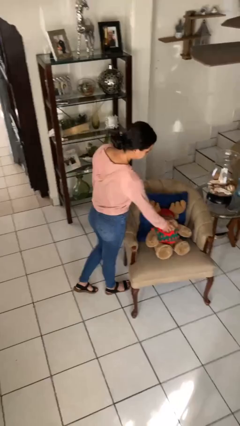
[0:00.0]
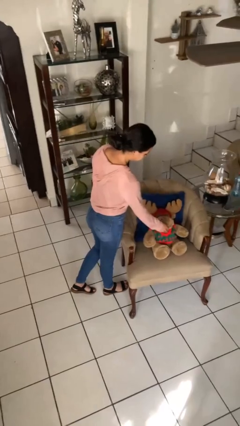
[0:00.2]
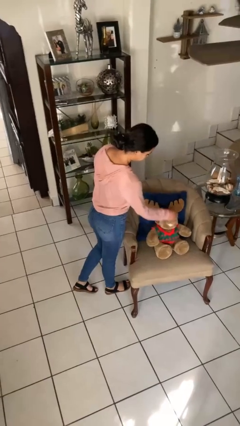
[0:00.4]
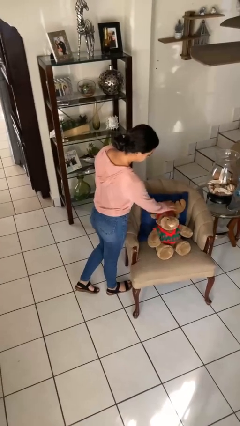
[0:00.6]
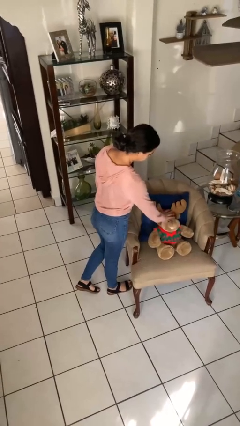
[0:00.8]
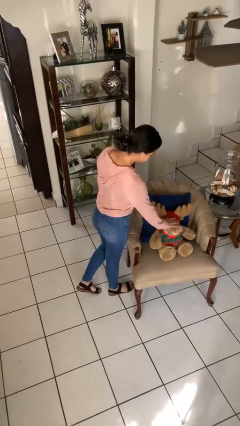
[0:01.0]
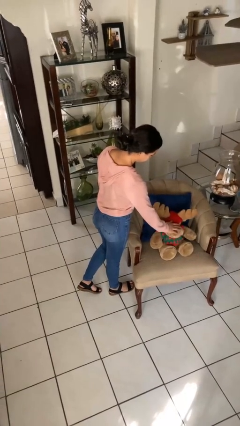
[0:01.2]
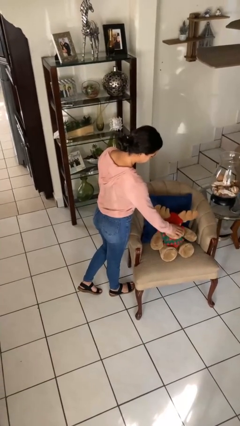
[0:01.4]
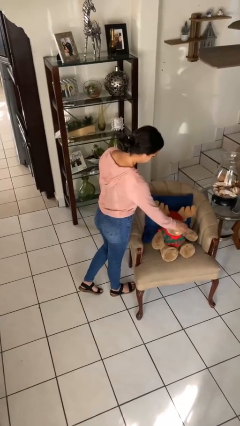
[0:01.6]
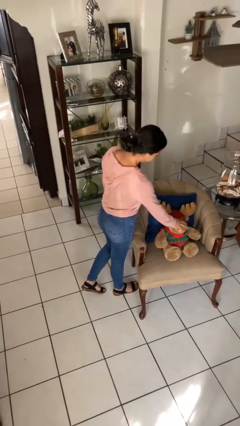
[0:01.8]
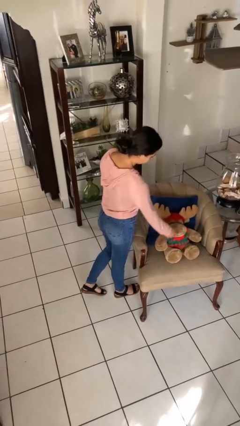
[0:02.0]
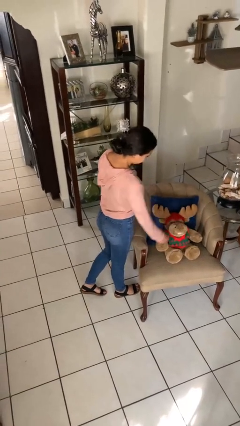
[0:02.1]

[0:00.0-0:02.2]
person waves hand over object

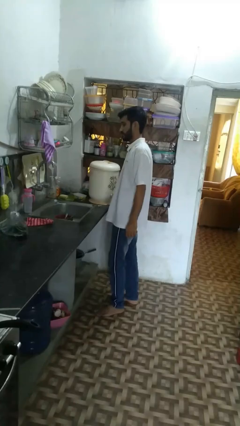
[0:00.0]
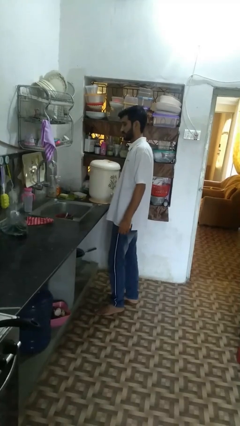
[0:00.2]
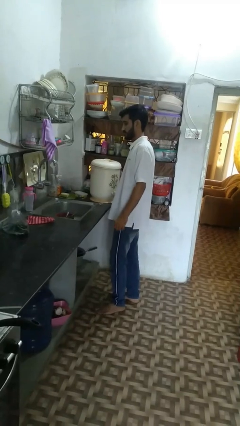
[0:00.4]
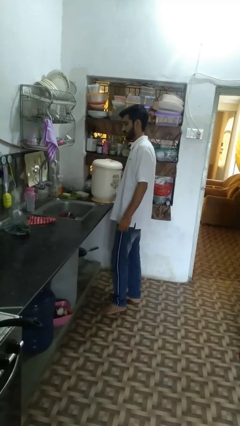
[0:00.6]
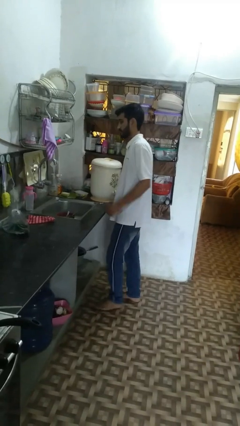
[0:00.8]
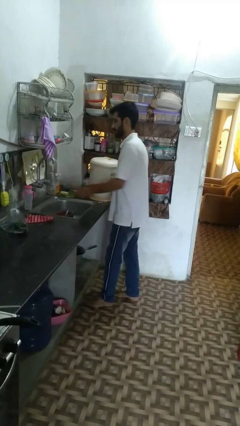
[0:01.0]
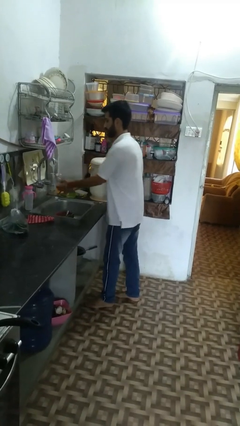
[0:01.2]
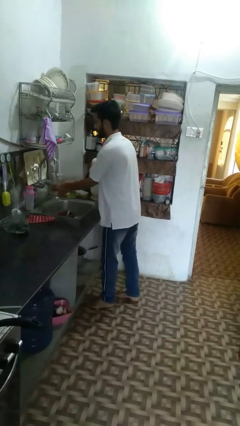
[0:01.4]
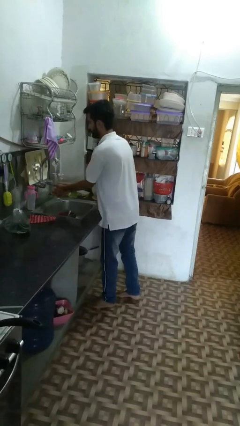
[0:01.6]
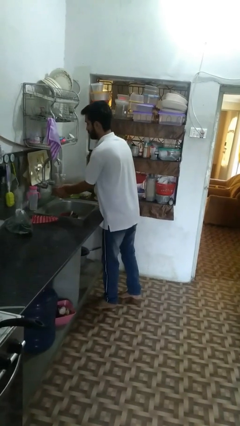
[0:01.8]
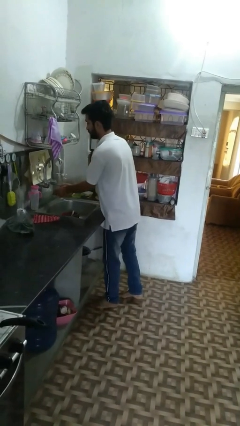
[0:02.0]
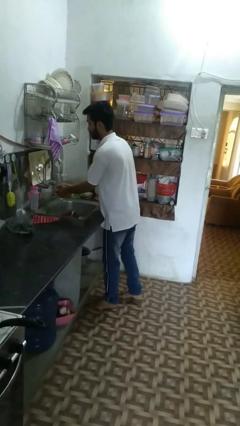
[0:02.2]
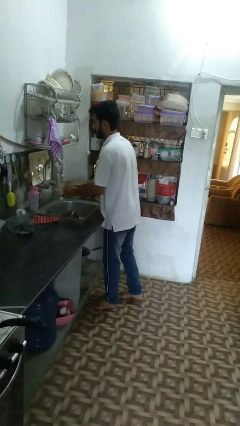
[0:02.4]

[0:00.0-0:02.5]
person washes hands

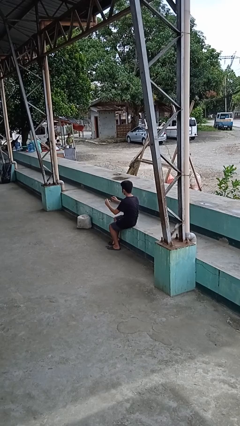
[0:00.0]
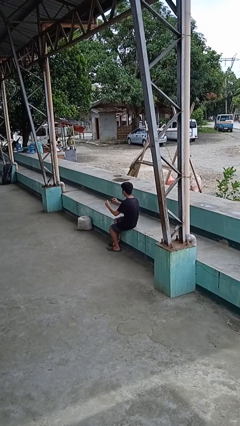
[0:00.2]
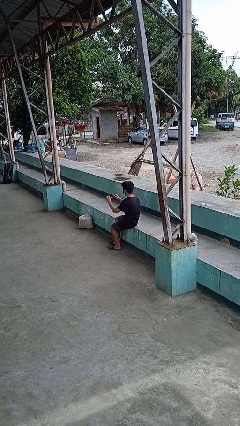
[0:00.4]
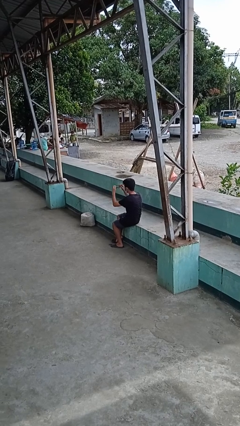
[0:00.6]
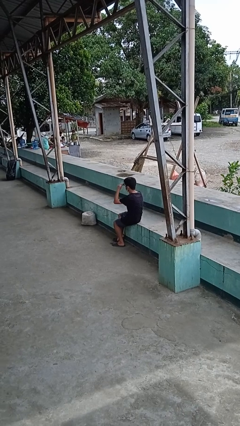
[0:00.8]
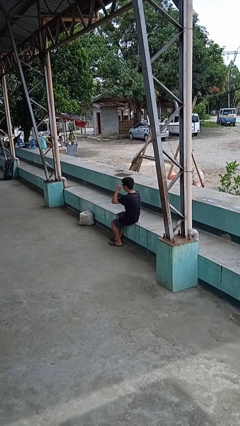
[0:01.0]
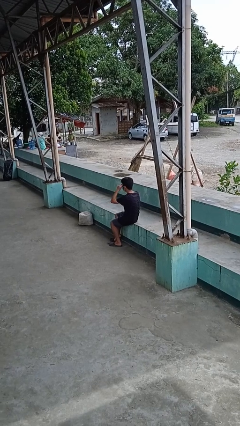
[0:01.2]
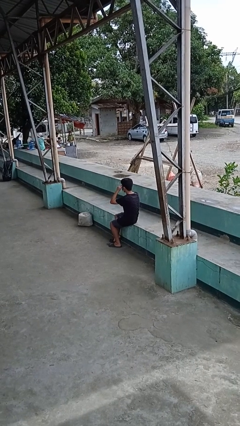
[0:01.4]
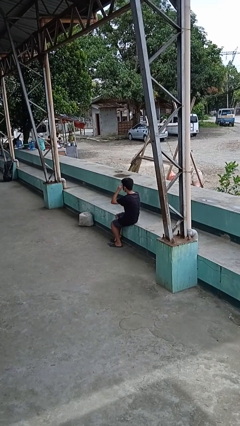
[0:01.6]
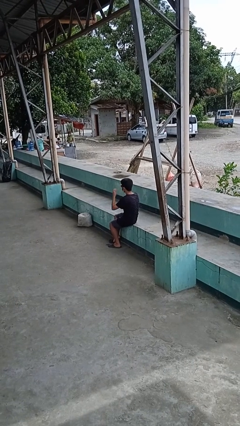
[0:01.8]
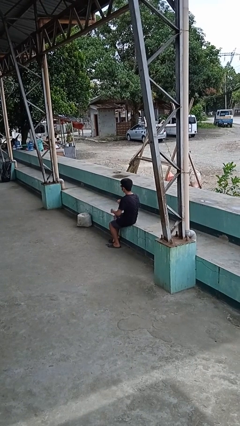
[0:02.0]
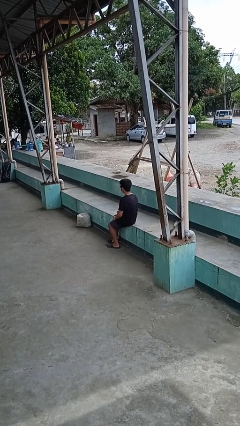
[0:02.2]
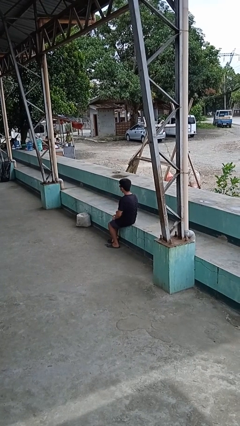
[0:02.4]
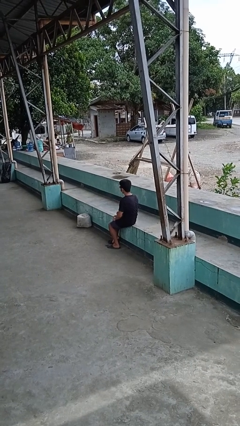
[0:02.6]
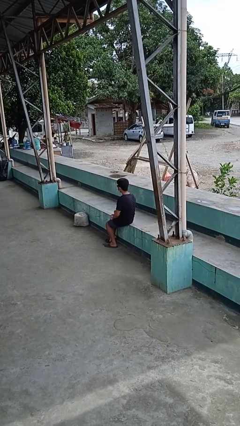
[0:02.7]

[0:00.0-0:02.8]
person puts on sunglasses

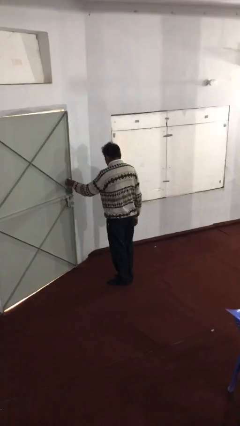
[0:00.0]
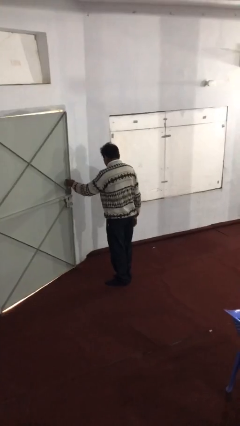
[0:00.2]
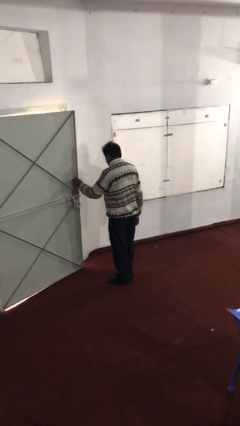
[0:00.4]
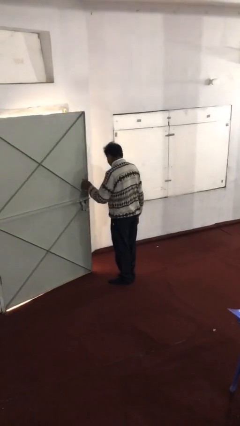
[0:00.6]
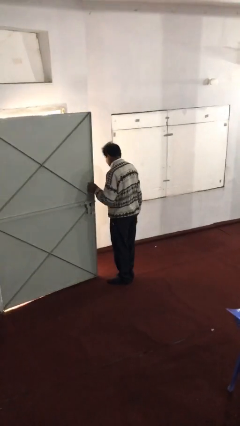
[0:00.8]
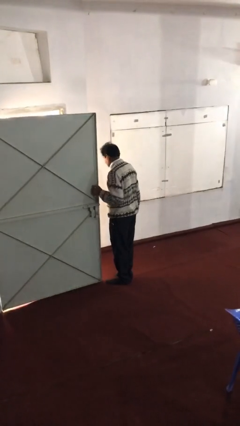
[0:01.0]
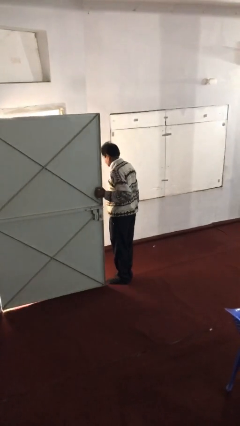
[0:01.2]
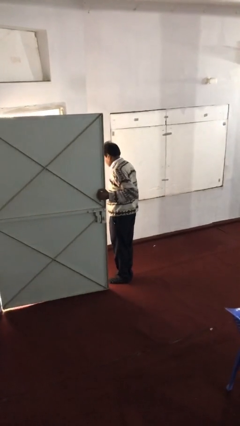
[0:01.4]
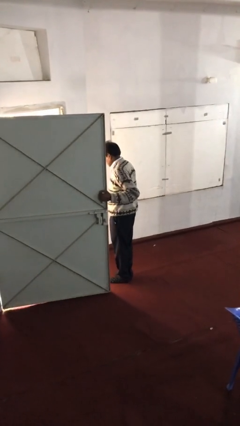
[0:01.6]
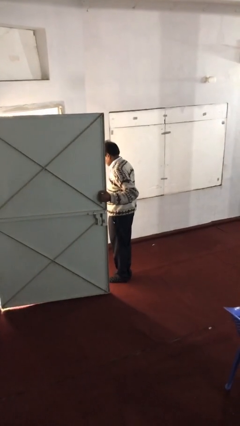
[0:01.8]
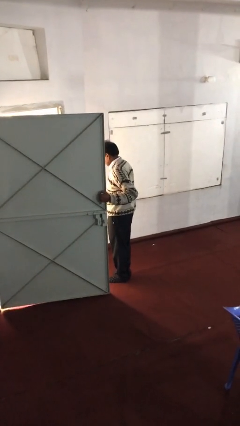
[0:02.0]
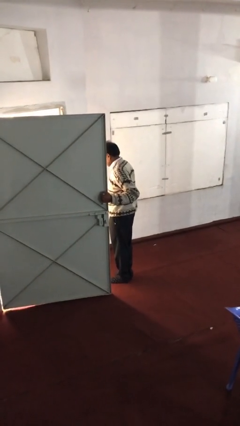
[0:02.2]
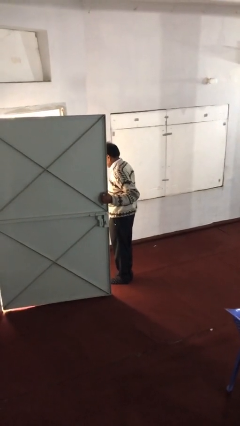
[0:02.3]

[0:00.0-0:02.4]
person opens facility door

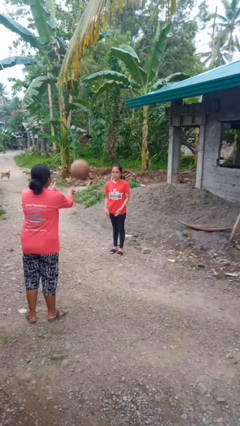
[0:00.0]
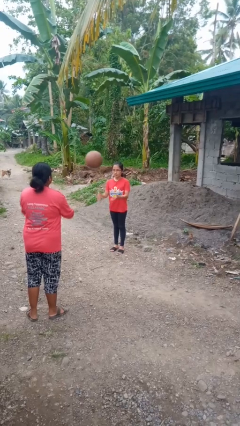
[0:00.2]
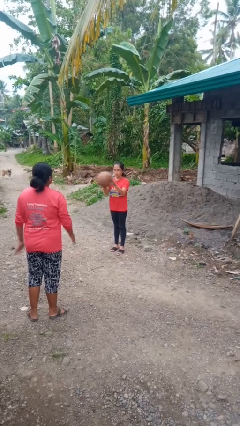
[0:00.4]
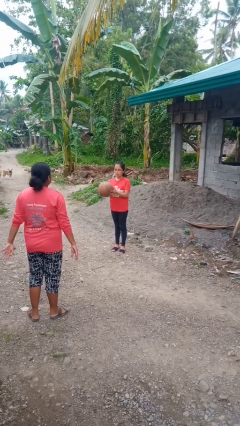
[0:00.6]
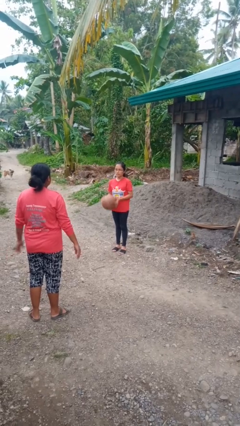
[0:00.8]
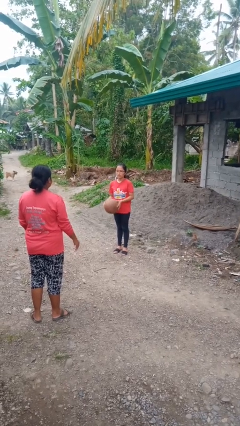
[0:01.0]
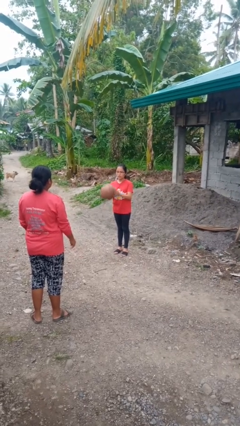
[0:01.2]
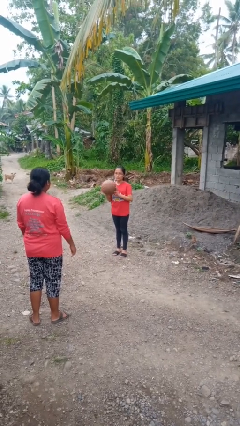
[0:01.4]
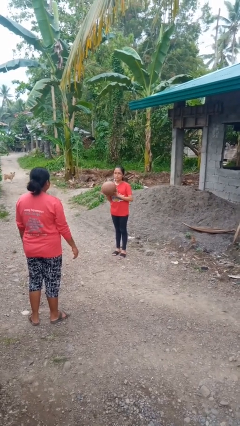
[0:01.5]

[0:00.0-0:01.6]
person catches object from person

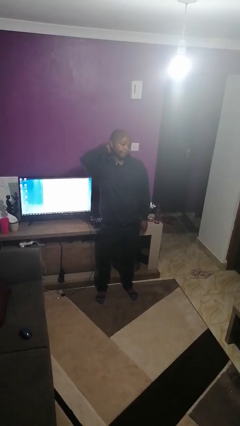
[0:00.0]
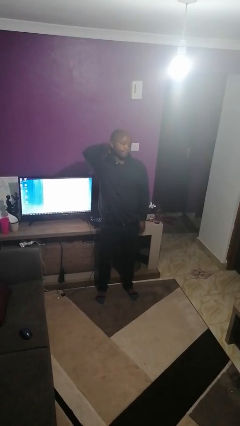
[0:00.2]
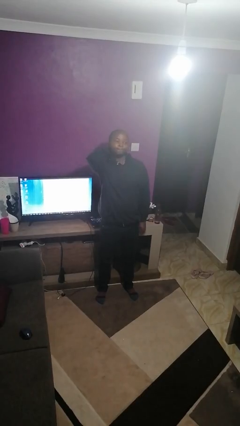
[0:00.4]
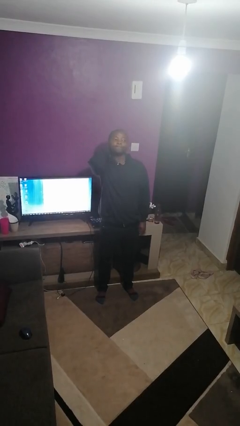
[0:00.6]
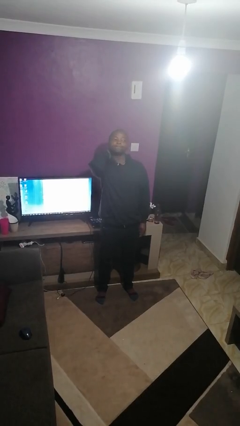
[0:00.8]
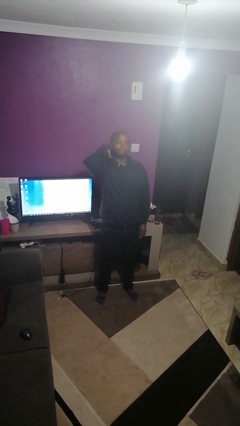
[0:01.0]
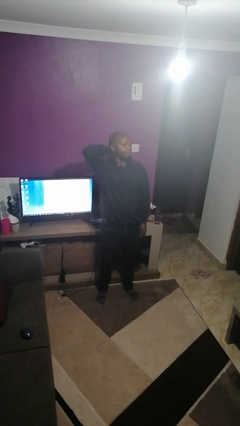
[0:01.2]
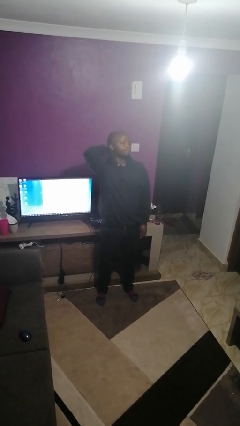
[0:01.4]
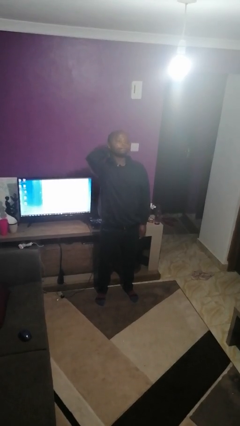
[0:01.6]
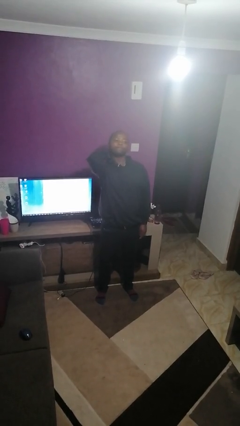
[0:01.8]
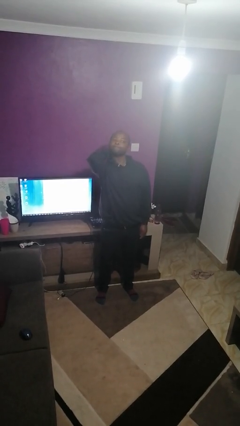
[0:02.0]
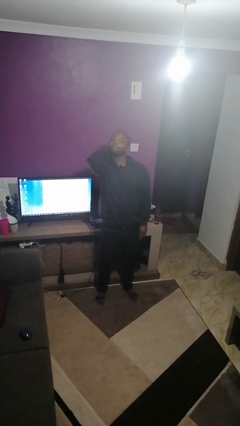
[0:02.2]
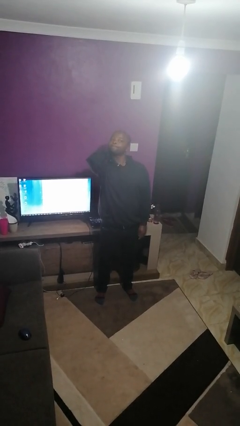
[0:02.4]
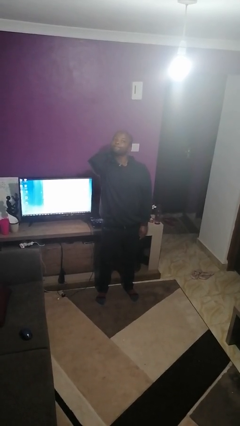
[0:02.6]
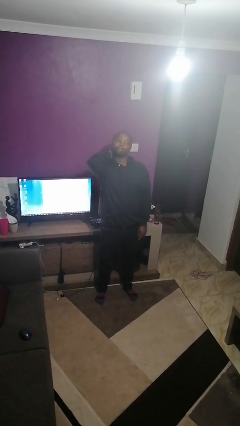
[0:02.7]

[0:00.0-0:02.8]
person rubs neck

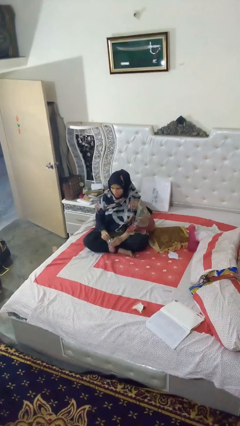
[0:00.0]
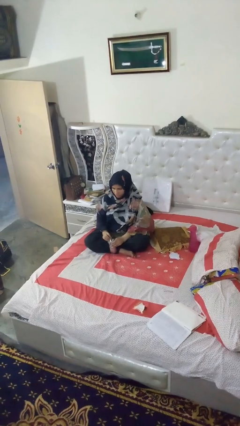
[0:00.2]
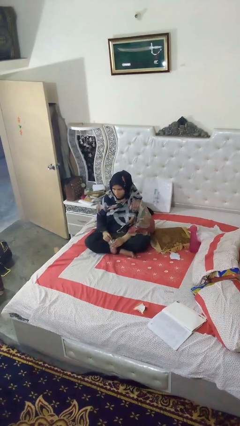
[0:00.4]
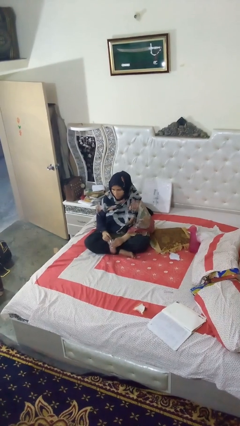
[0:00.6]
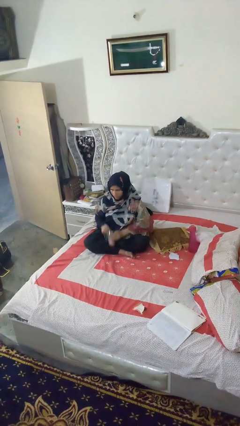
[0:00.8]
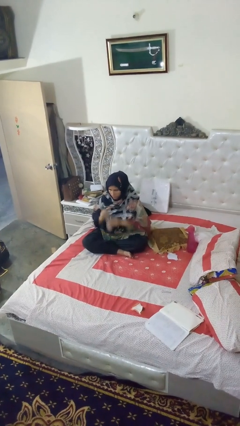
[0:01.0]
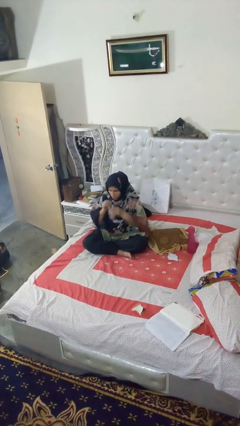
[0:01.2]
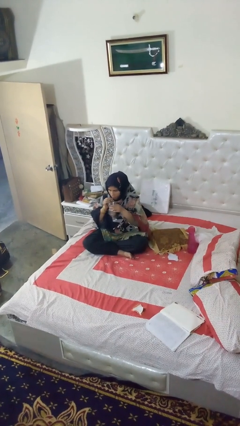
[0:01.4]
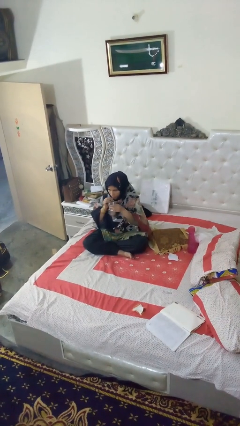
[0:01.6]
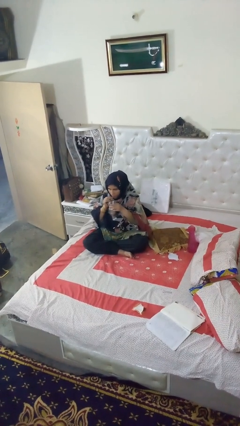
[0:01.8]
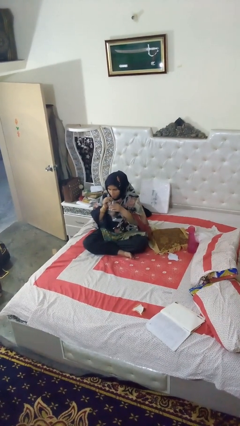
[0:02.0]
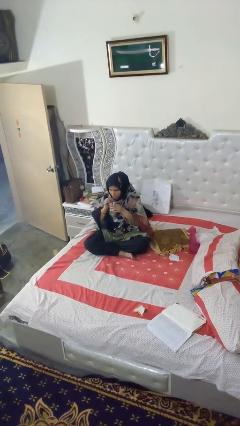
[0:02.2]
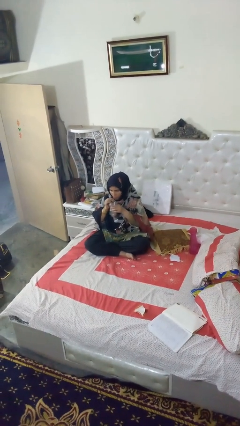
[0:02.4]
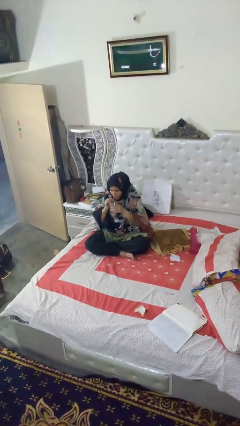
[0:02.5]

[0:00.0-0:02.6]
person drinks from straw

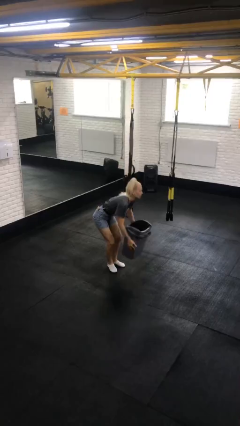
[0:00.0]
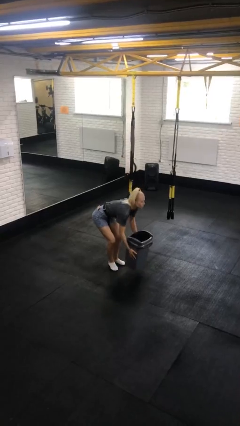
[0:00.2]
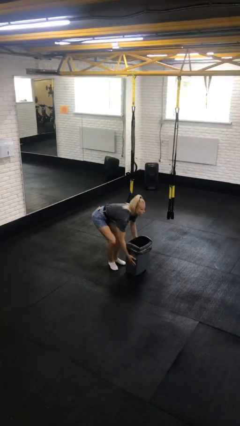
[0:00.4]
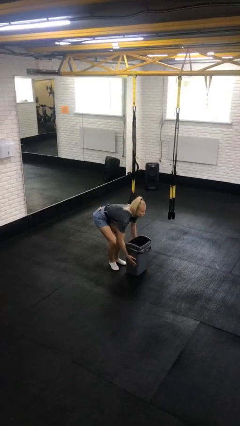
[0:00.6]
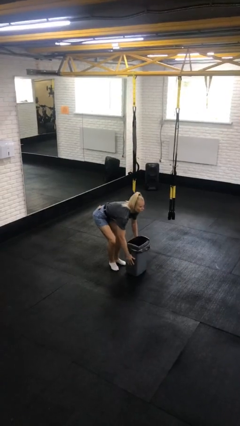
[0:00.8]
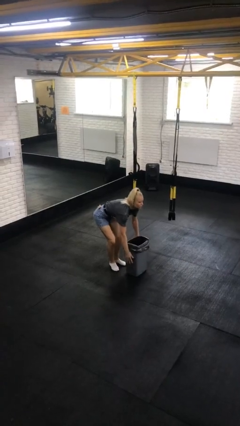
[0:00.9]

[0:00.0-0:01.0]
person puts down object on floor
